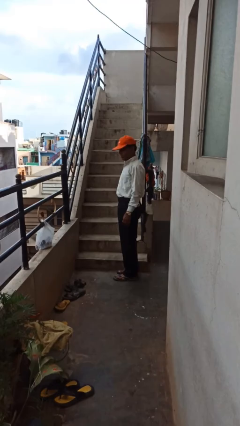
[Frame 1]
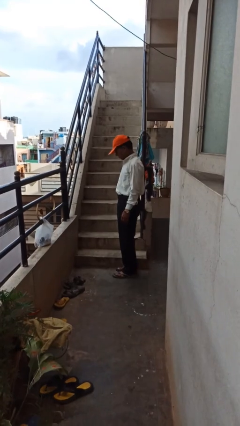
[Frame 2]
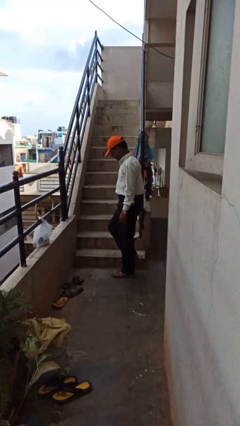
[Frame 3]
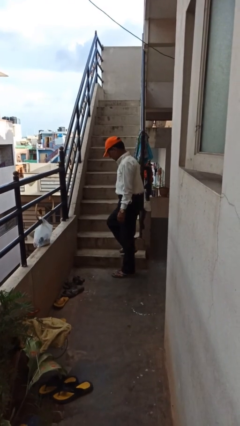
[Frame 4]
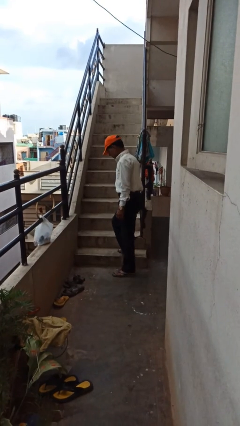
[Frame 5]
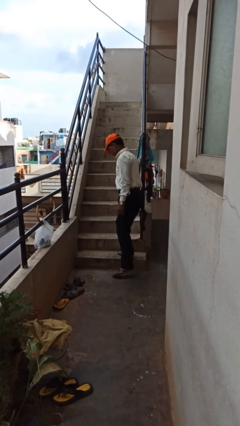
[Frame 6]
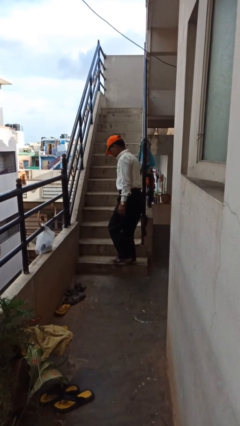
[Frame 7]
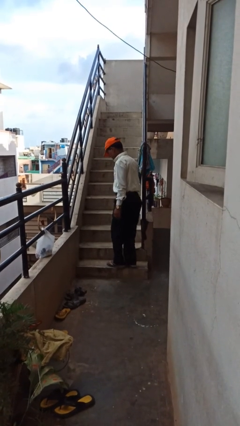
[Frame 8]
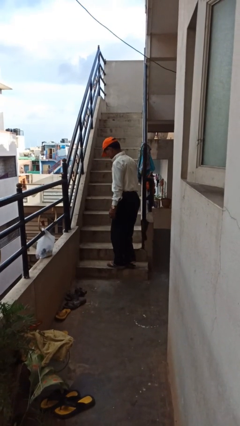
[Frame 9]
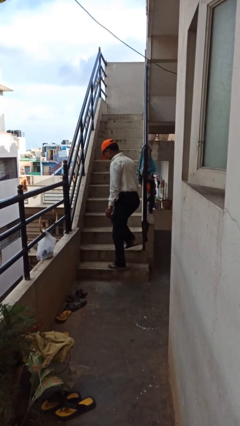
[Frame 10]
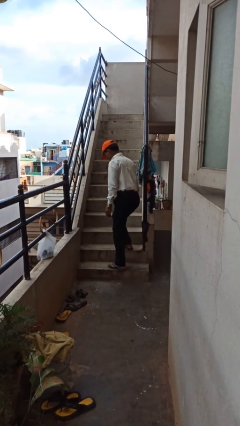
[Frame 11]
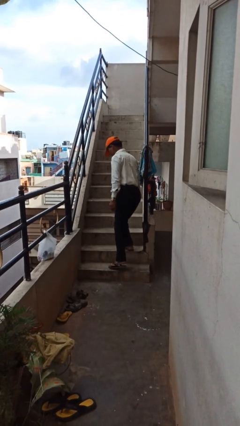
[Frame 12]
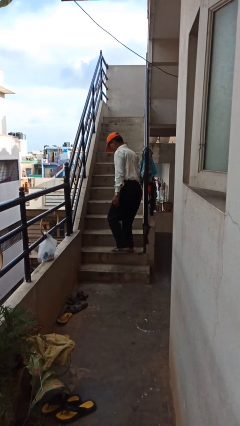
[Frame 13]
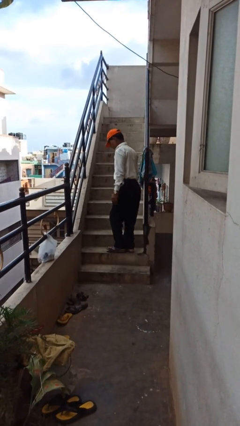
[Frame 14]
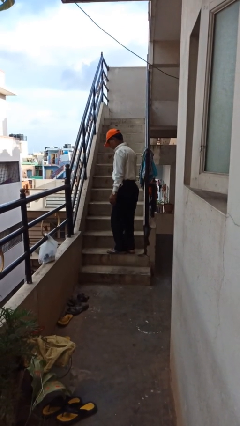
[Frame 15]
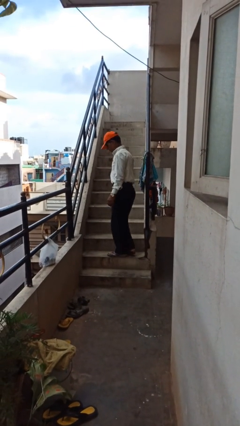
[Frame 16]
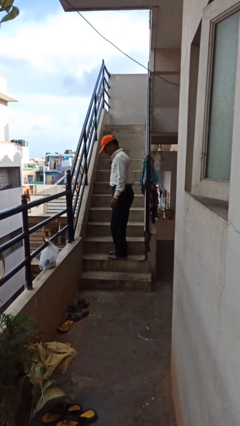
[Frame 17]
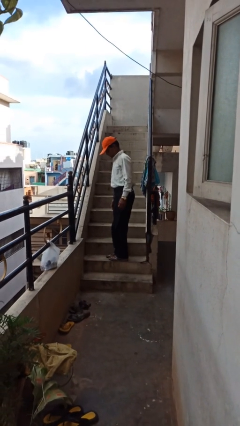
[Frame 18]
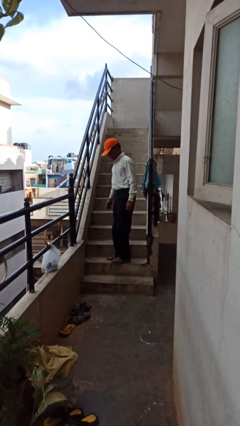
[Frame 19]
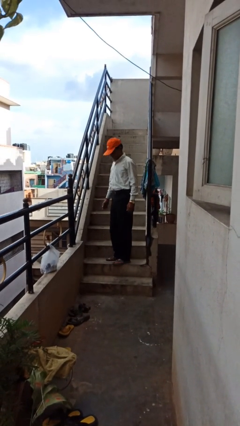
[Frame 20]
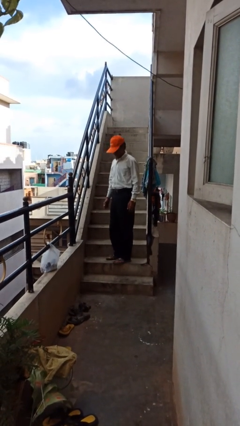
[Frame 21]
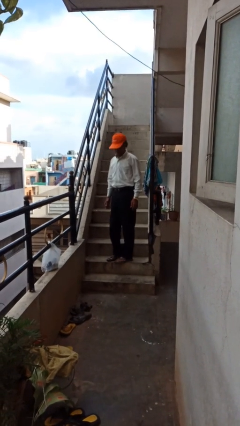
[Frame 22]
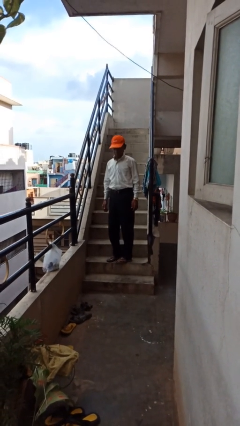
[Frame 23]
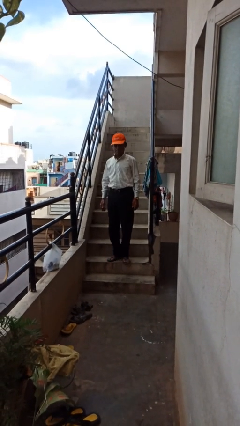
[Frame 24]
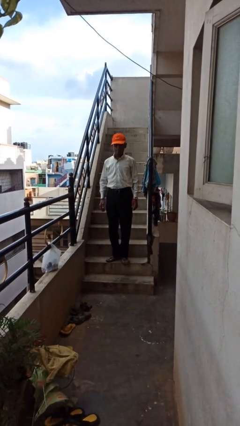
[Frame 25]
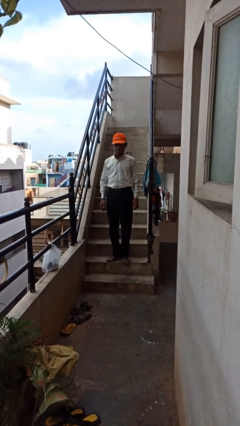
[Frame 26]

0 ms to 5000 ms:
person climbs up stairs

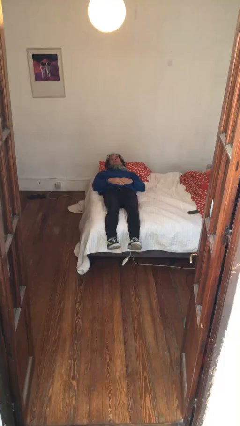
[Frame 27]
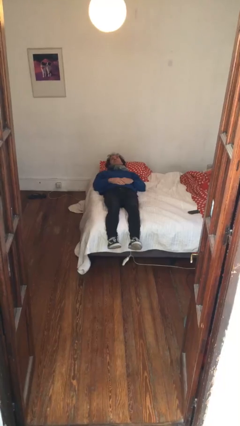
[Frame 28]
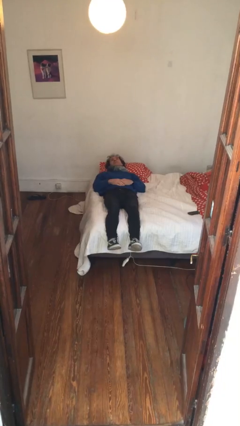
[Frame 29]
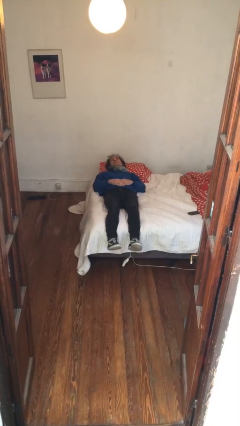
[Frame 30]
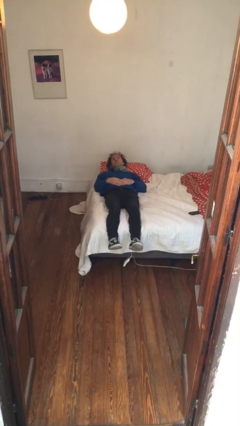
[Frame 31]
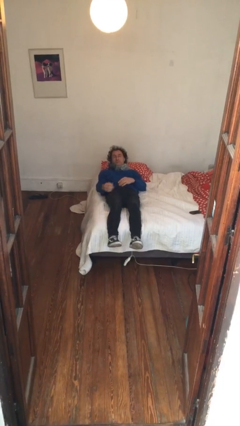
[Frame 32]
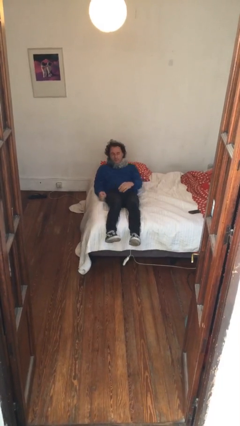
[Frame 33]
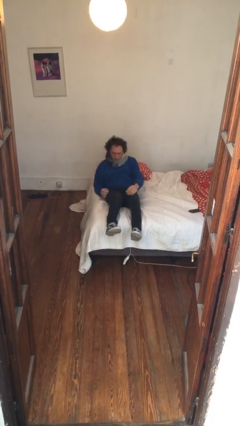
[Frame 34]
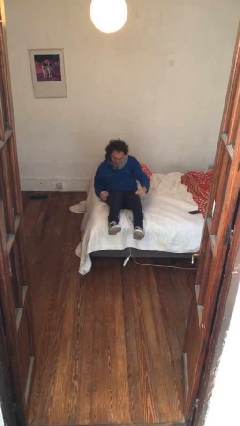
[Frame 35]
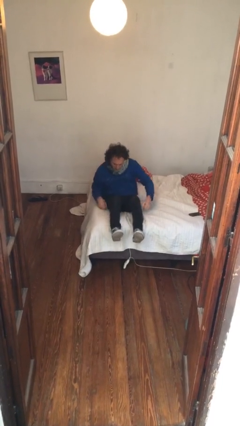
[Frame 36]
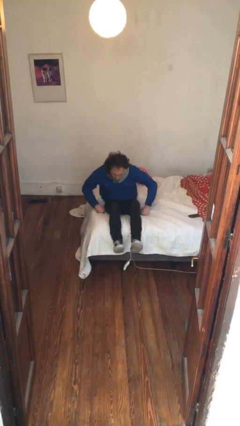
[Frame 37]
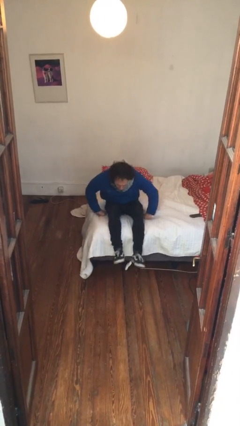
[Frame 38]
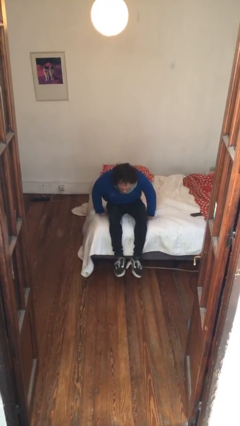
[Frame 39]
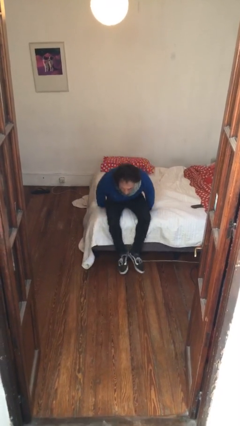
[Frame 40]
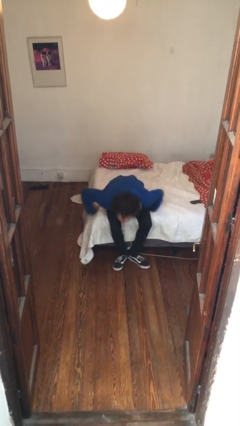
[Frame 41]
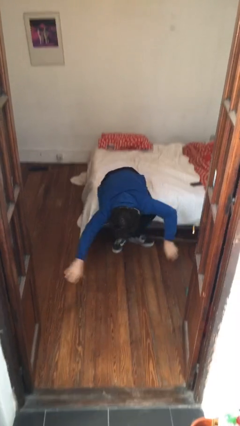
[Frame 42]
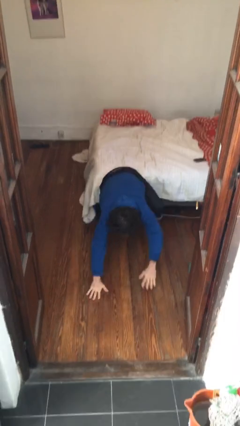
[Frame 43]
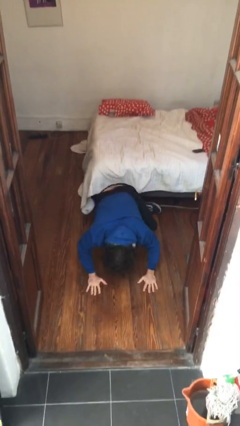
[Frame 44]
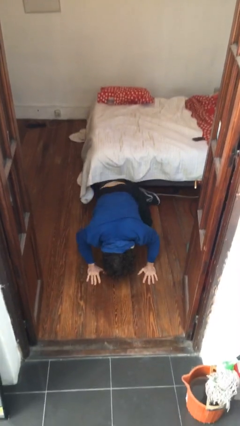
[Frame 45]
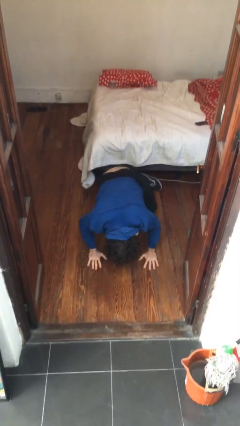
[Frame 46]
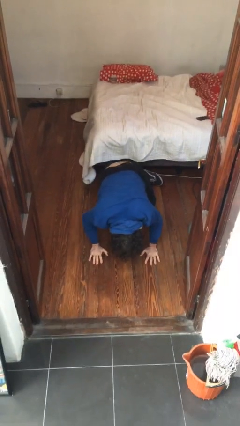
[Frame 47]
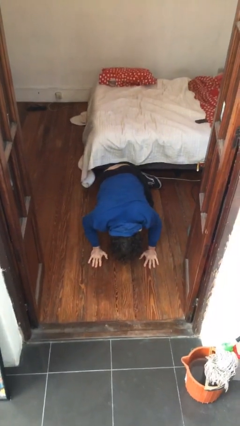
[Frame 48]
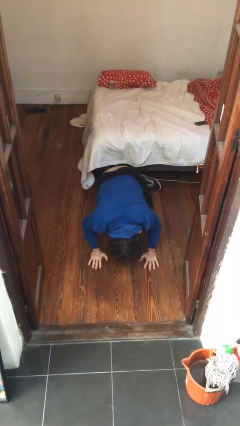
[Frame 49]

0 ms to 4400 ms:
person falls from bed

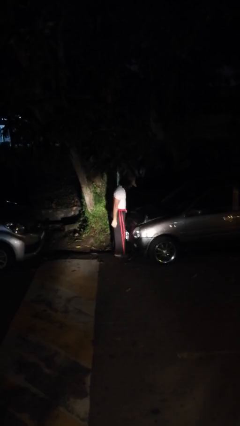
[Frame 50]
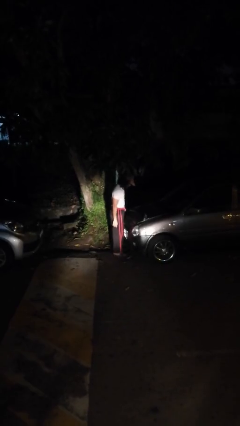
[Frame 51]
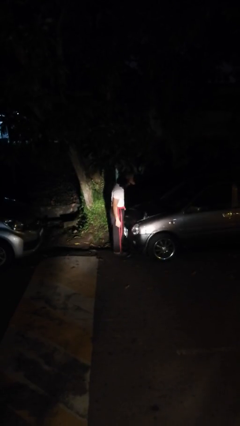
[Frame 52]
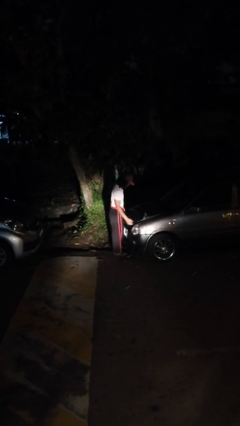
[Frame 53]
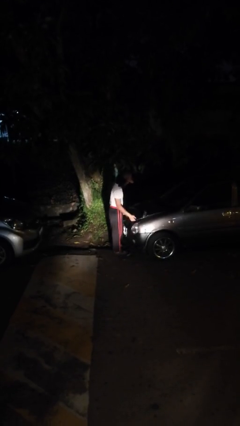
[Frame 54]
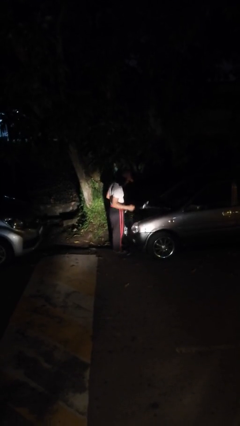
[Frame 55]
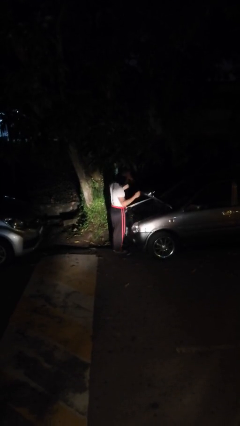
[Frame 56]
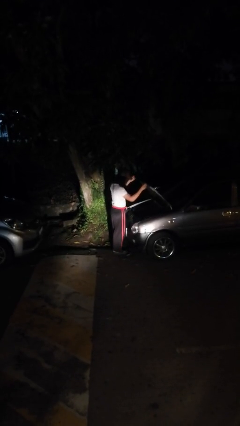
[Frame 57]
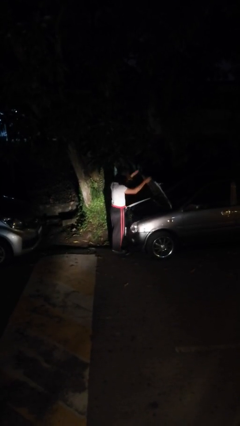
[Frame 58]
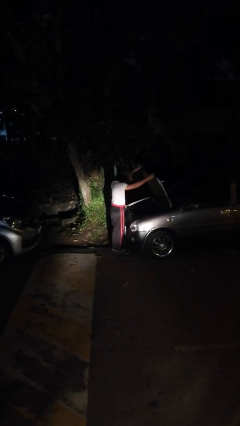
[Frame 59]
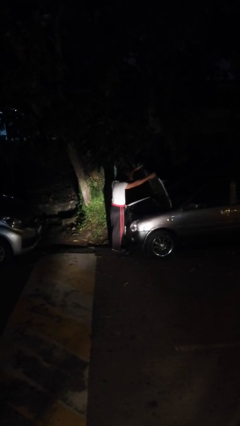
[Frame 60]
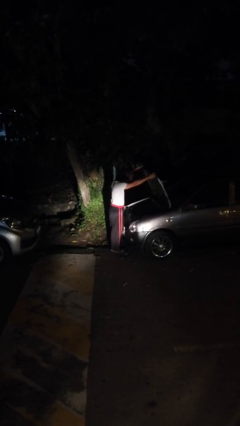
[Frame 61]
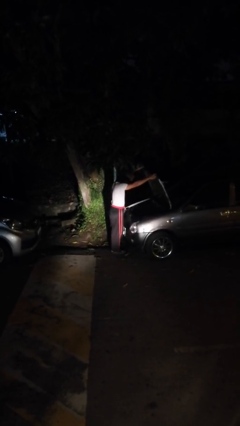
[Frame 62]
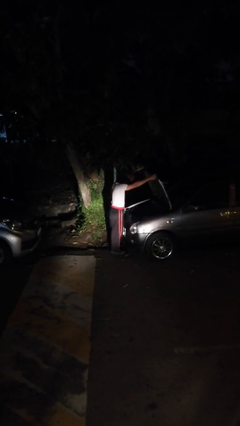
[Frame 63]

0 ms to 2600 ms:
person opens car hood

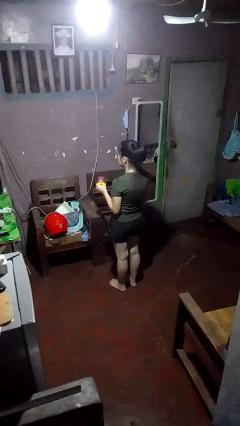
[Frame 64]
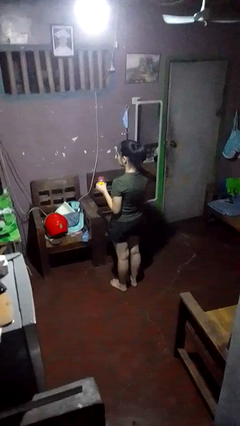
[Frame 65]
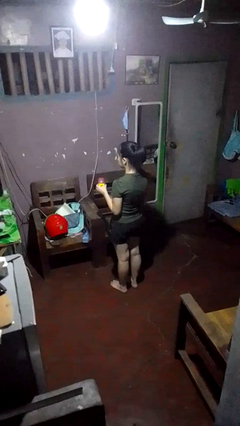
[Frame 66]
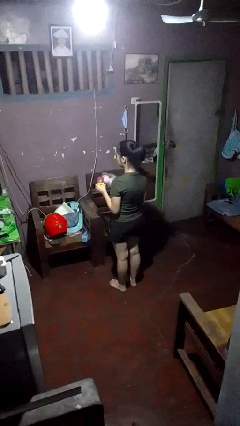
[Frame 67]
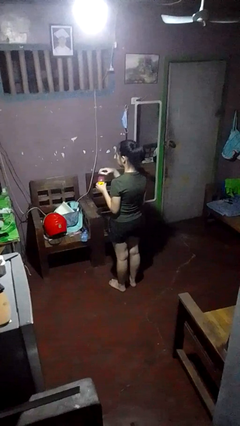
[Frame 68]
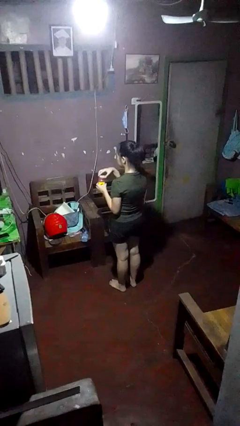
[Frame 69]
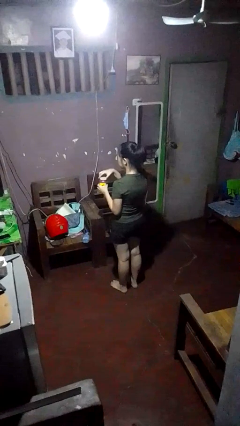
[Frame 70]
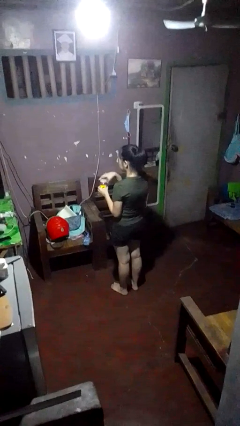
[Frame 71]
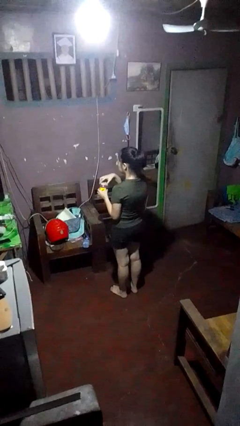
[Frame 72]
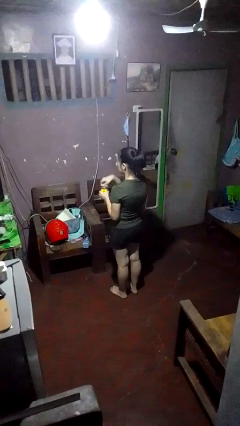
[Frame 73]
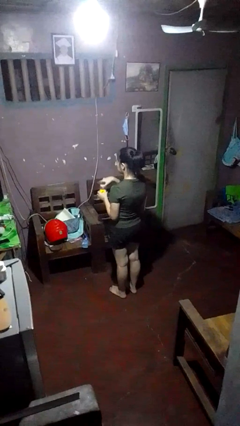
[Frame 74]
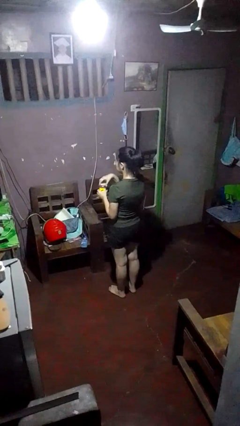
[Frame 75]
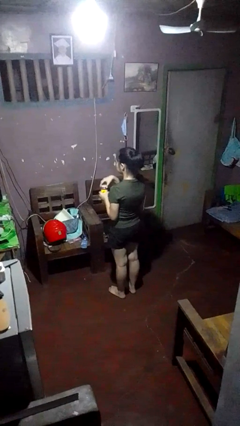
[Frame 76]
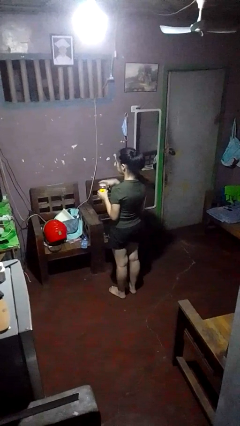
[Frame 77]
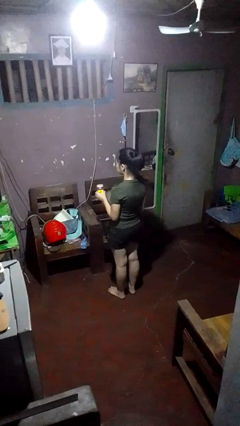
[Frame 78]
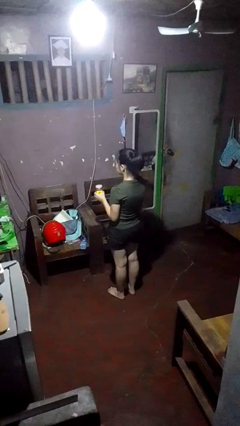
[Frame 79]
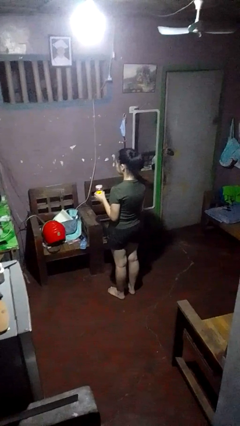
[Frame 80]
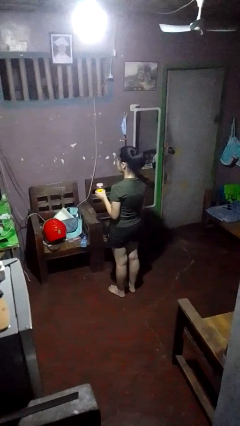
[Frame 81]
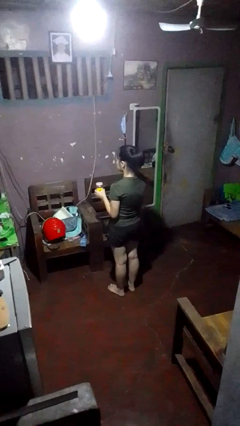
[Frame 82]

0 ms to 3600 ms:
person closes jar

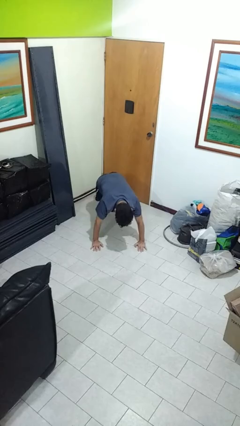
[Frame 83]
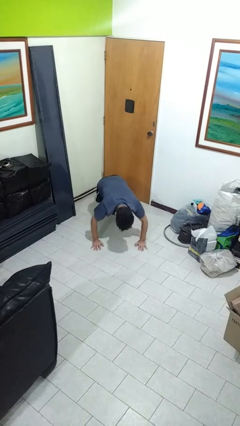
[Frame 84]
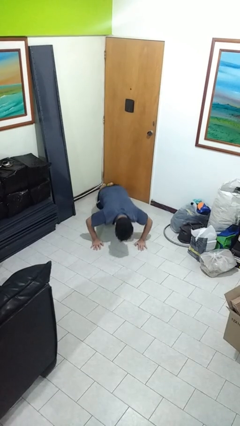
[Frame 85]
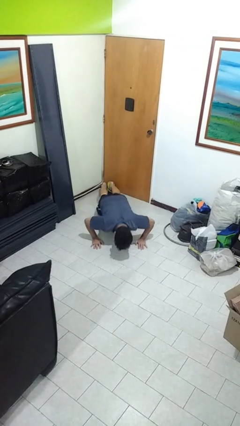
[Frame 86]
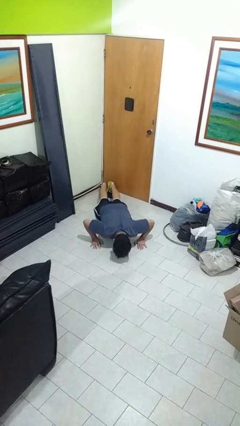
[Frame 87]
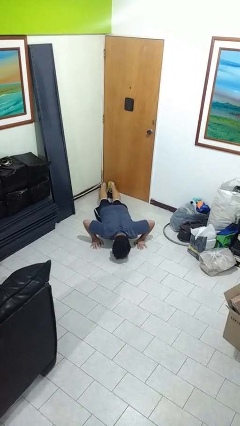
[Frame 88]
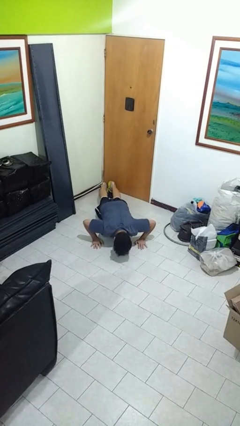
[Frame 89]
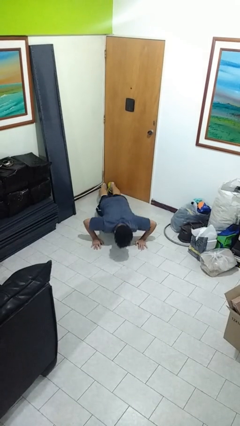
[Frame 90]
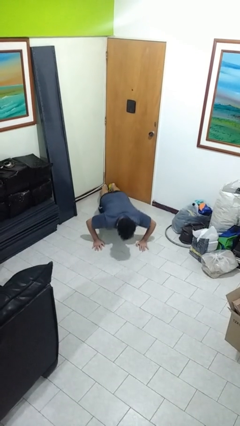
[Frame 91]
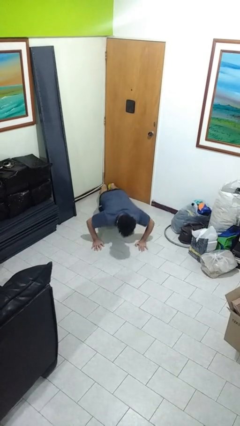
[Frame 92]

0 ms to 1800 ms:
person exercises with pushup

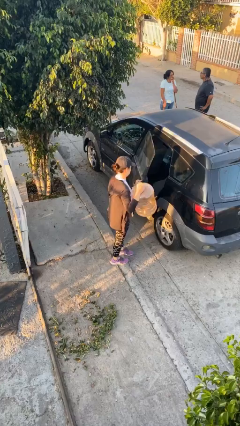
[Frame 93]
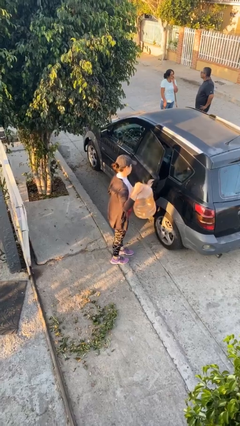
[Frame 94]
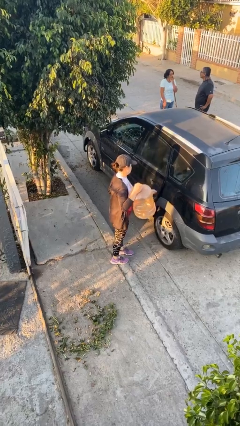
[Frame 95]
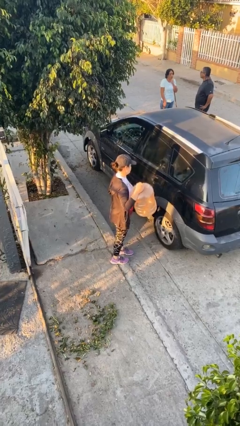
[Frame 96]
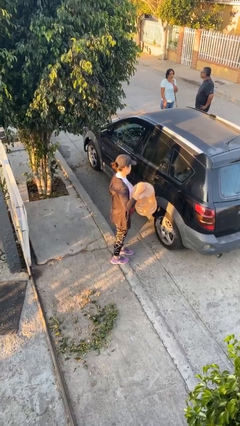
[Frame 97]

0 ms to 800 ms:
person closes car door
